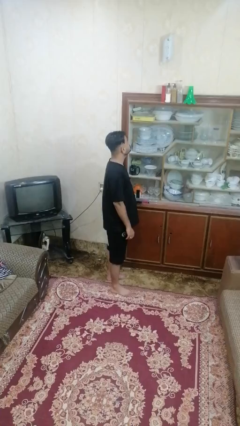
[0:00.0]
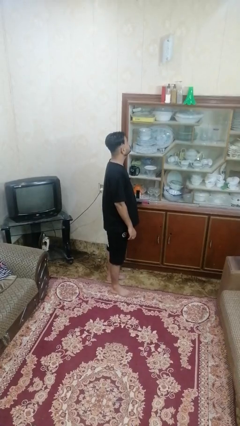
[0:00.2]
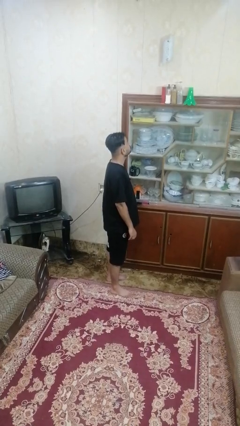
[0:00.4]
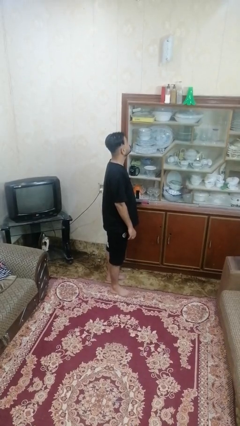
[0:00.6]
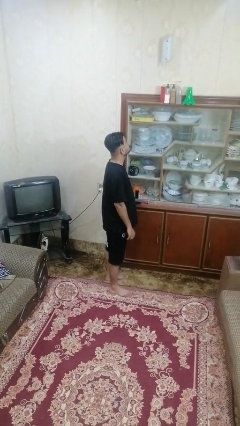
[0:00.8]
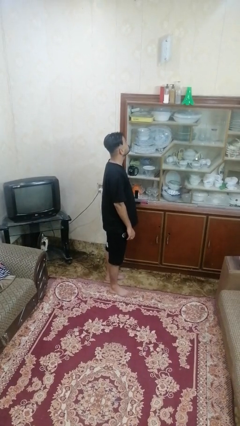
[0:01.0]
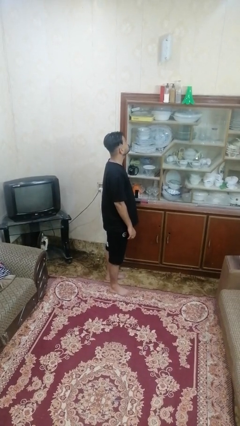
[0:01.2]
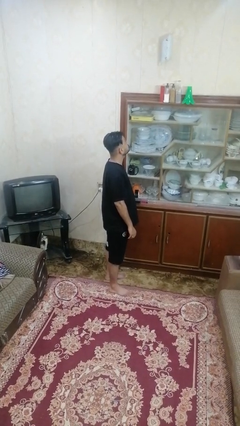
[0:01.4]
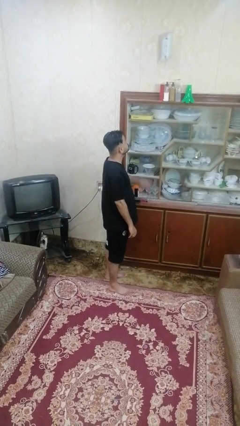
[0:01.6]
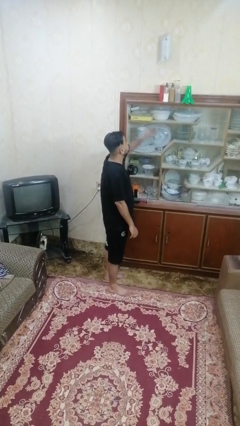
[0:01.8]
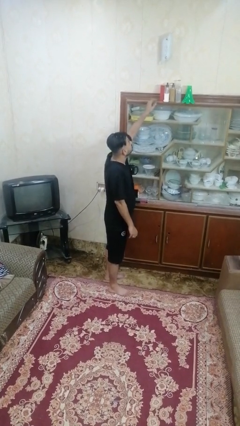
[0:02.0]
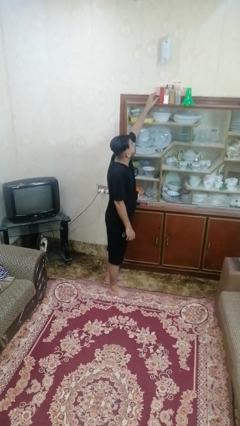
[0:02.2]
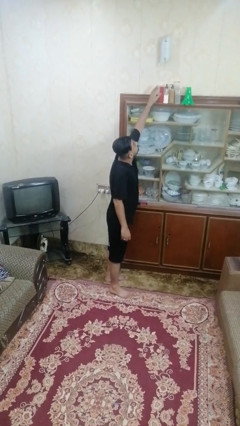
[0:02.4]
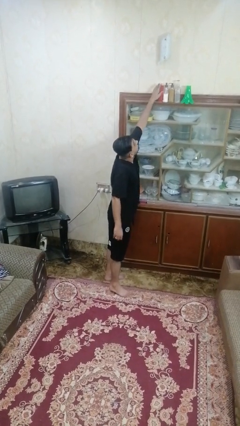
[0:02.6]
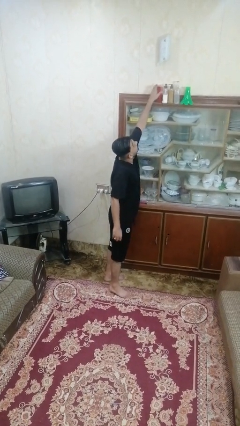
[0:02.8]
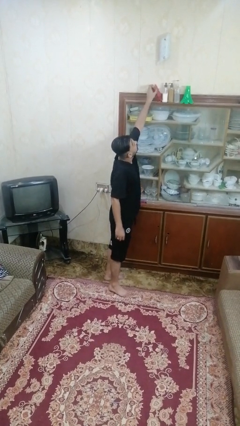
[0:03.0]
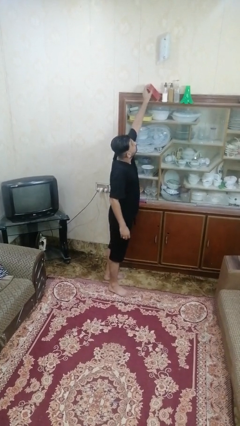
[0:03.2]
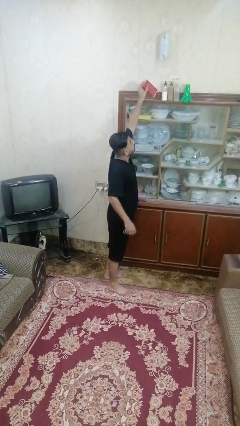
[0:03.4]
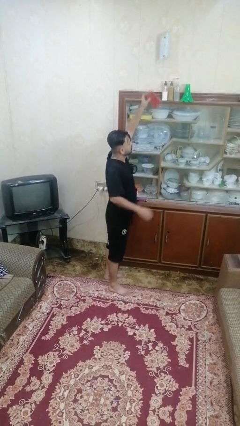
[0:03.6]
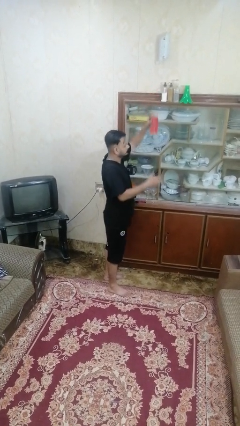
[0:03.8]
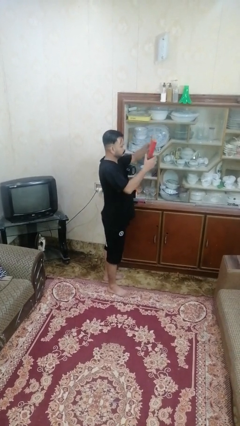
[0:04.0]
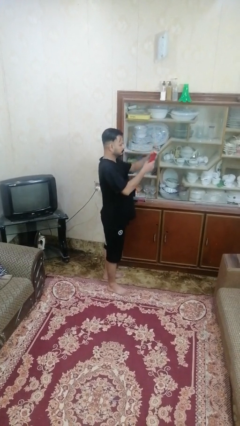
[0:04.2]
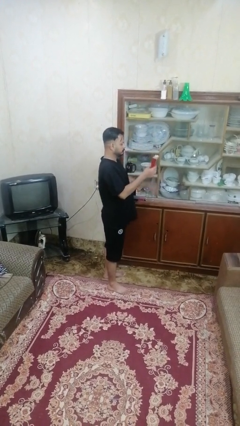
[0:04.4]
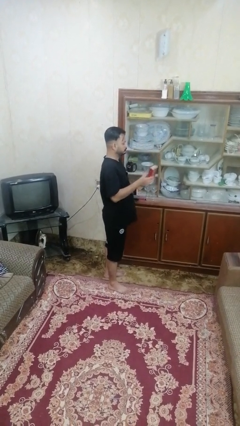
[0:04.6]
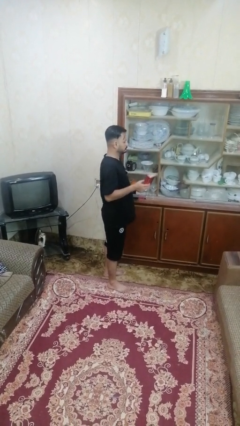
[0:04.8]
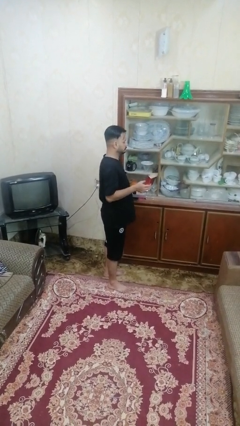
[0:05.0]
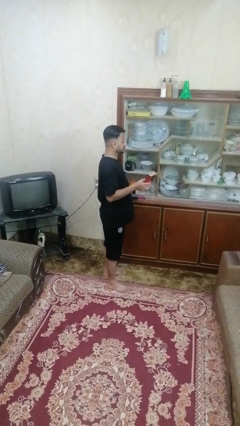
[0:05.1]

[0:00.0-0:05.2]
person picks up object from shelf

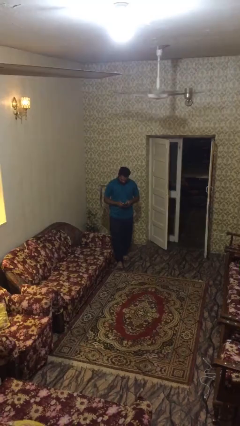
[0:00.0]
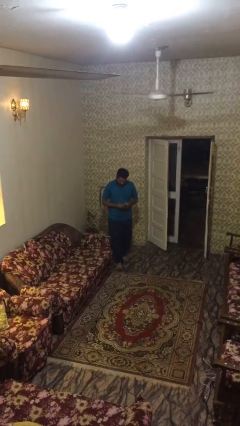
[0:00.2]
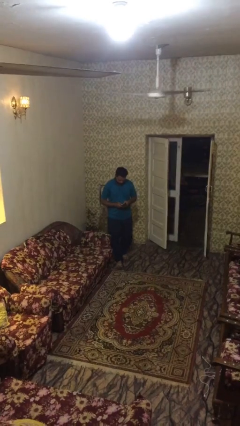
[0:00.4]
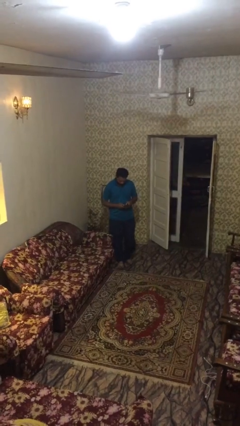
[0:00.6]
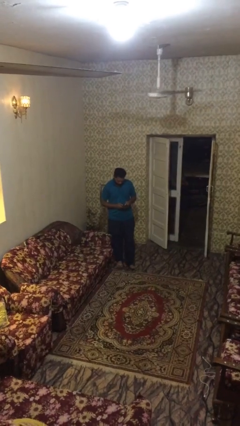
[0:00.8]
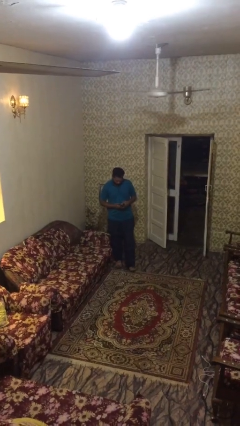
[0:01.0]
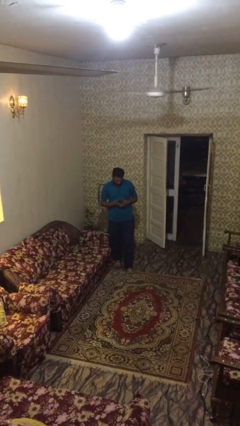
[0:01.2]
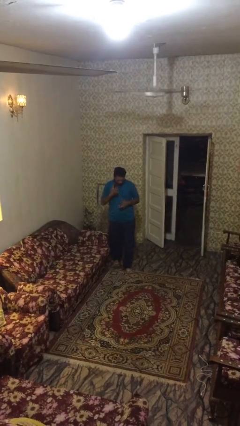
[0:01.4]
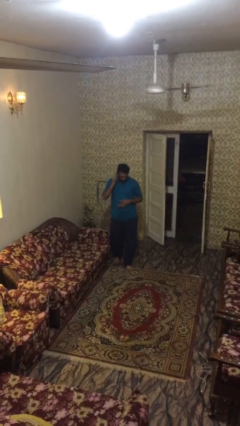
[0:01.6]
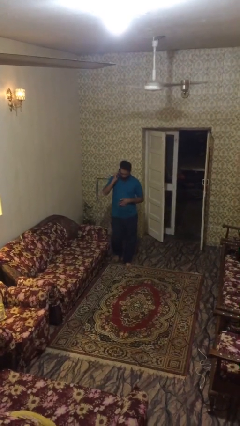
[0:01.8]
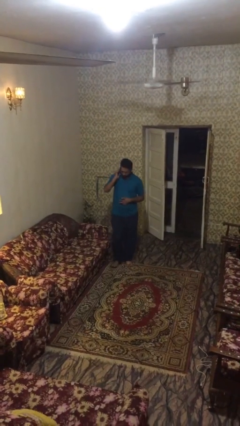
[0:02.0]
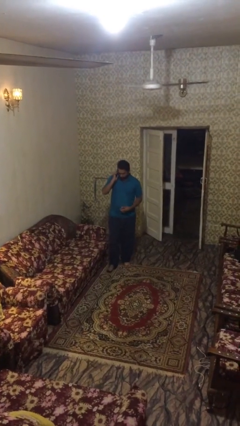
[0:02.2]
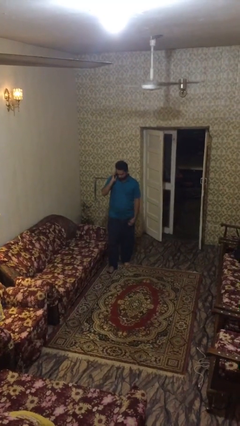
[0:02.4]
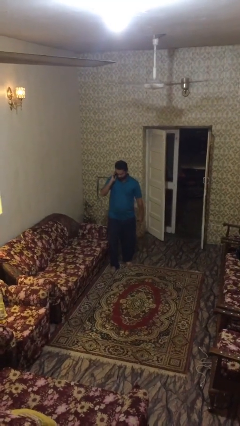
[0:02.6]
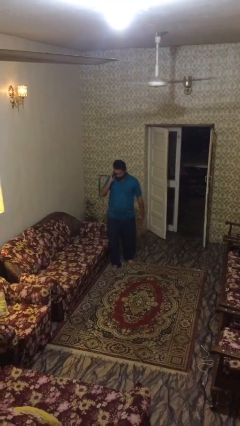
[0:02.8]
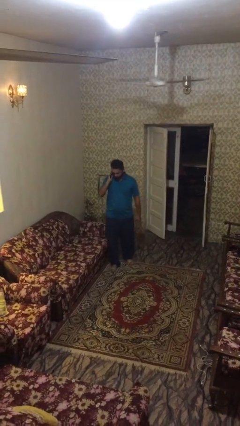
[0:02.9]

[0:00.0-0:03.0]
person talks on phone

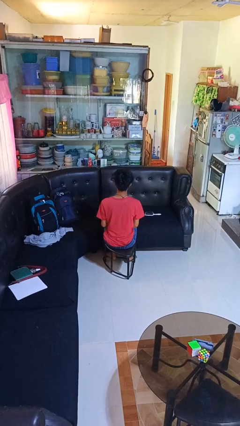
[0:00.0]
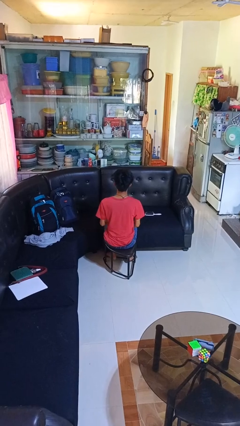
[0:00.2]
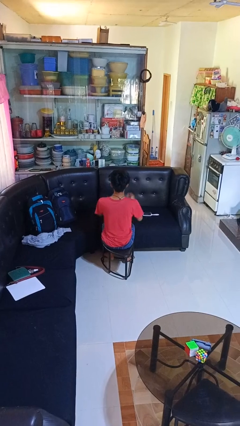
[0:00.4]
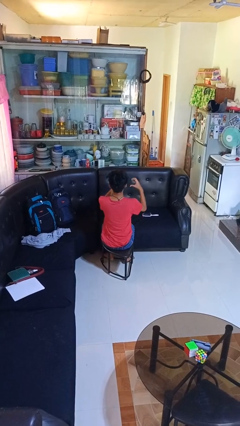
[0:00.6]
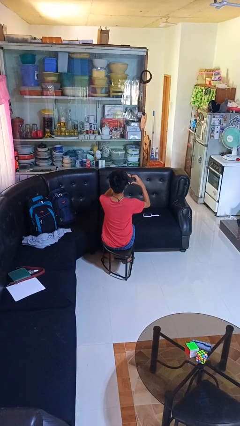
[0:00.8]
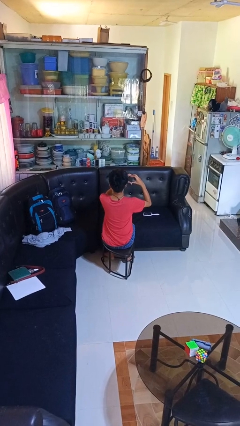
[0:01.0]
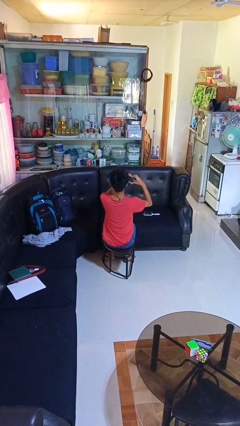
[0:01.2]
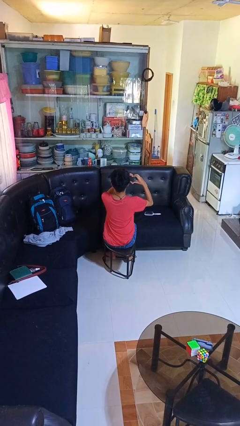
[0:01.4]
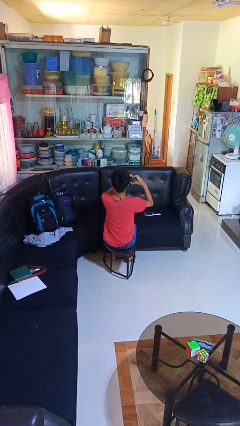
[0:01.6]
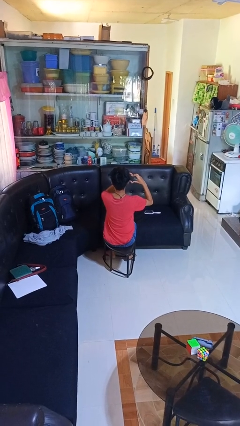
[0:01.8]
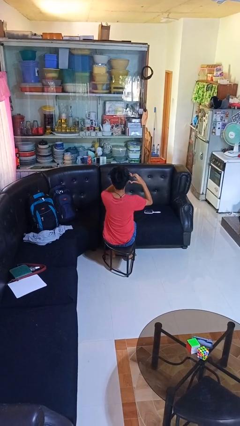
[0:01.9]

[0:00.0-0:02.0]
person gestures heart

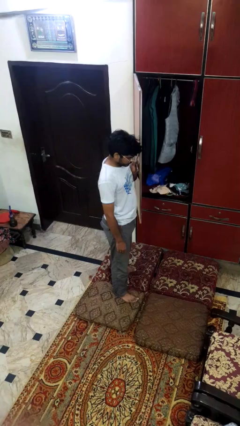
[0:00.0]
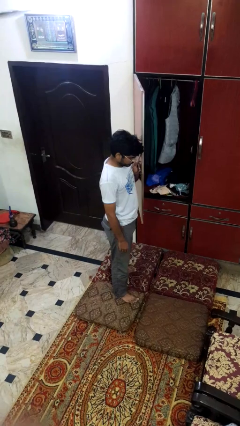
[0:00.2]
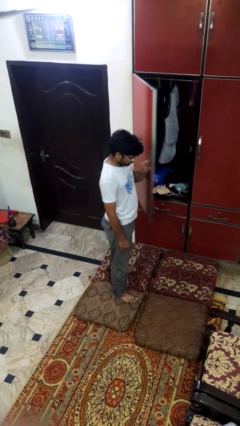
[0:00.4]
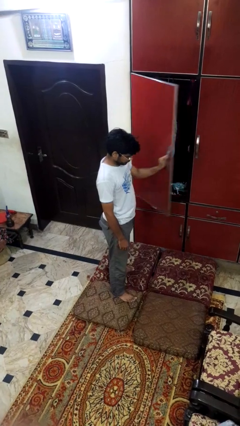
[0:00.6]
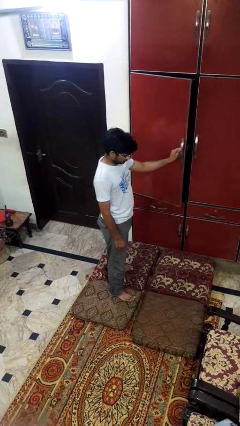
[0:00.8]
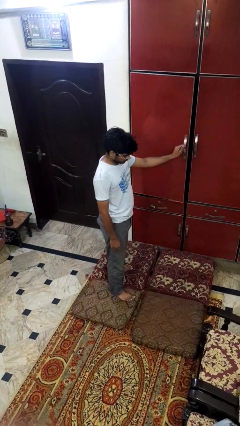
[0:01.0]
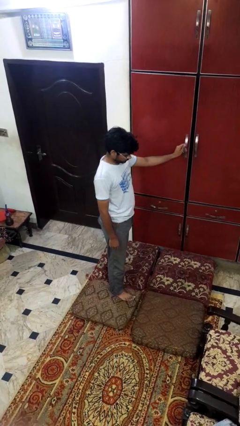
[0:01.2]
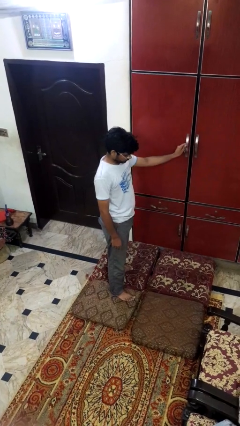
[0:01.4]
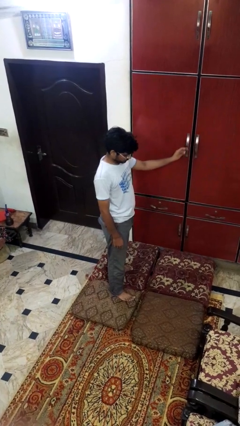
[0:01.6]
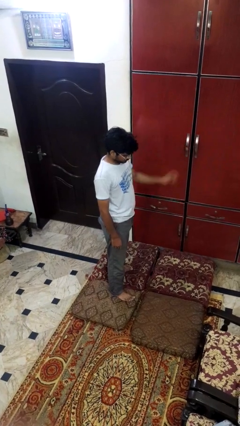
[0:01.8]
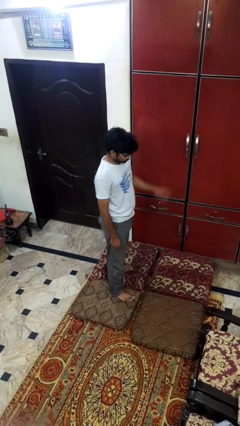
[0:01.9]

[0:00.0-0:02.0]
person closes closet door

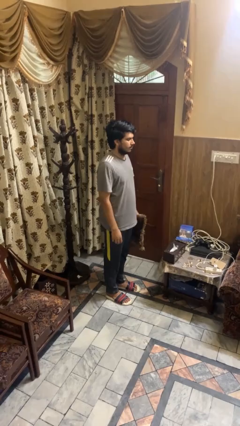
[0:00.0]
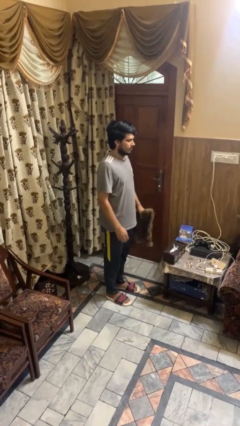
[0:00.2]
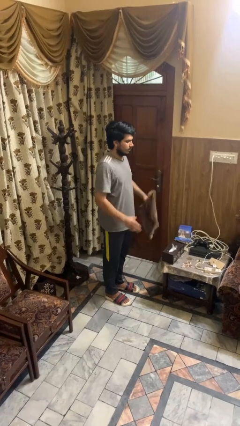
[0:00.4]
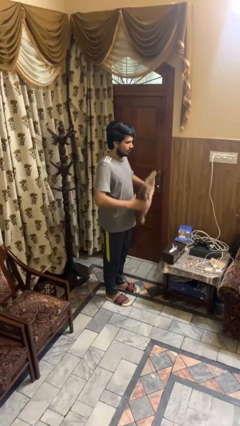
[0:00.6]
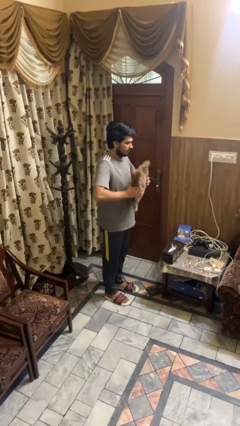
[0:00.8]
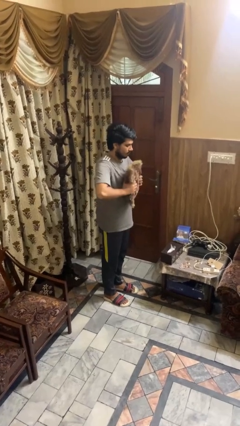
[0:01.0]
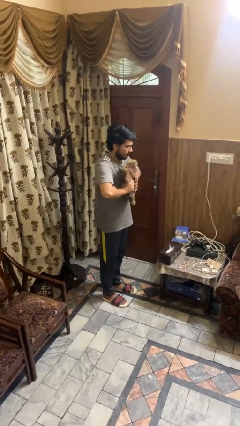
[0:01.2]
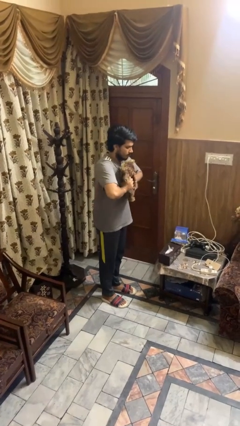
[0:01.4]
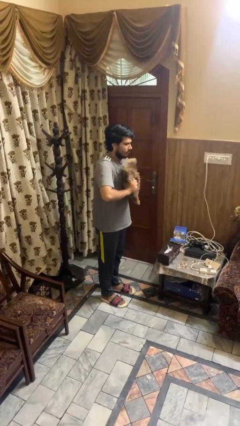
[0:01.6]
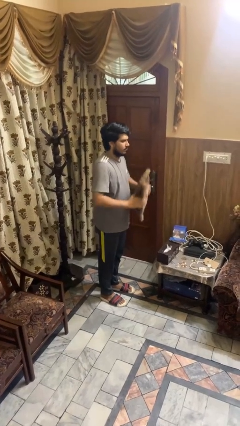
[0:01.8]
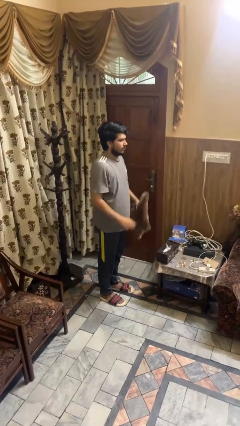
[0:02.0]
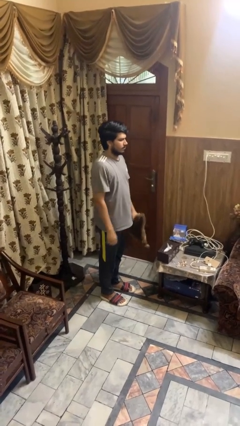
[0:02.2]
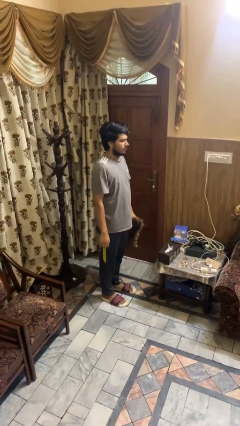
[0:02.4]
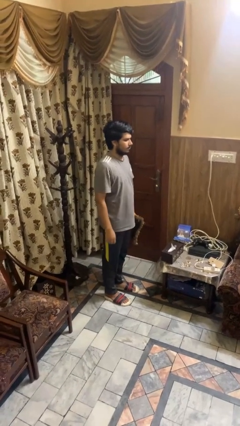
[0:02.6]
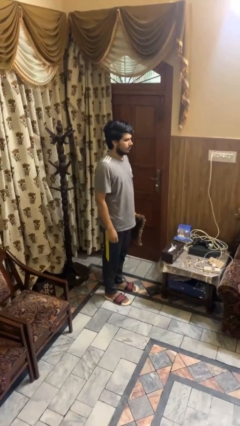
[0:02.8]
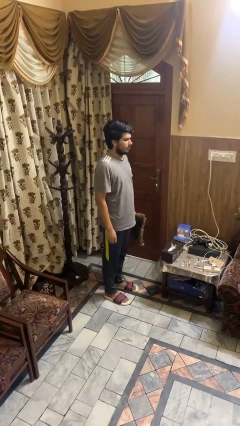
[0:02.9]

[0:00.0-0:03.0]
person squeezes object

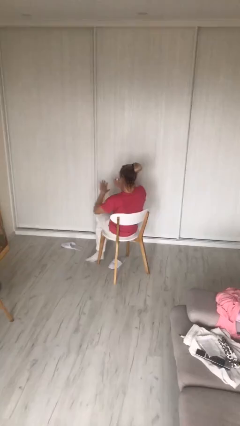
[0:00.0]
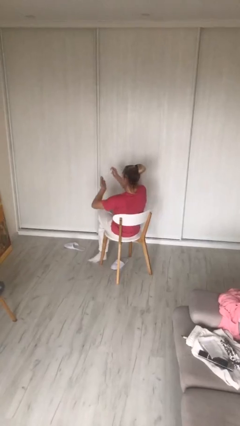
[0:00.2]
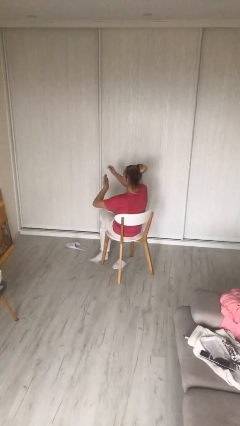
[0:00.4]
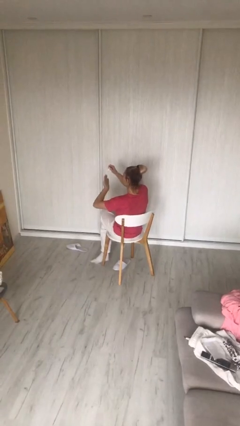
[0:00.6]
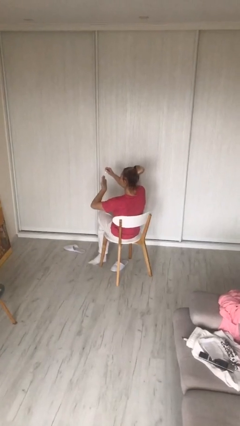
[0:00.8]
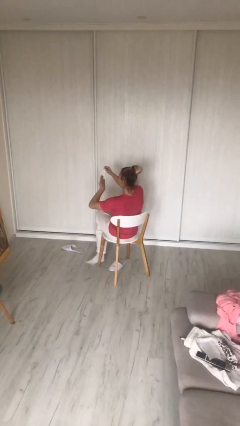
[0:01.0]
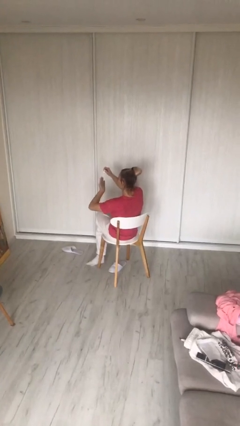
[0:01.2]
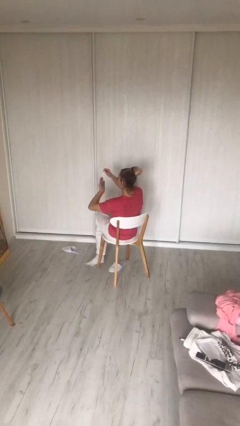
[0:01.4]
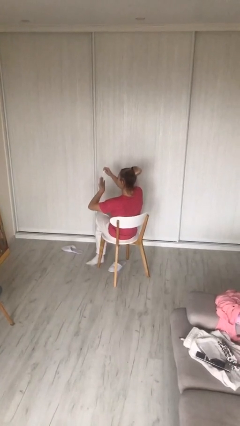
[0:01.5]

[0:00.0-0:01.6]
person paints fingernails

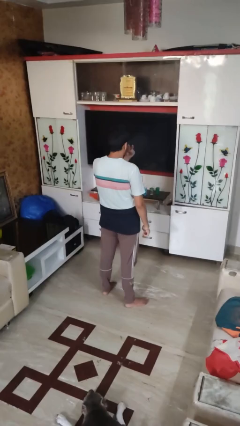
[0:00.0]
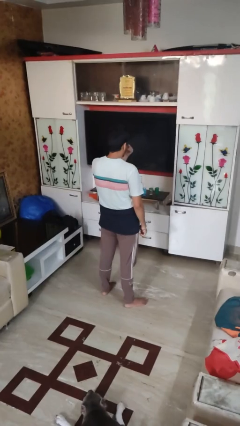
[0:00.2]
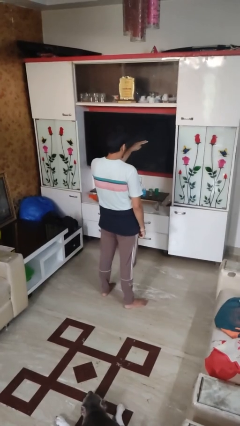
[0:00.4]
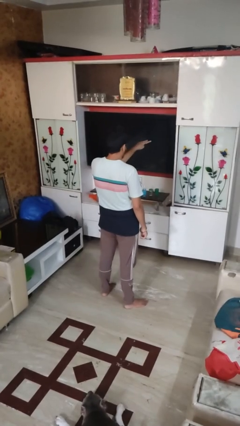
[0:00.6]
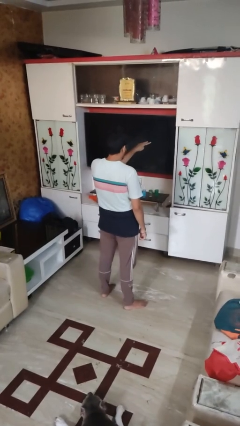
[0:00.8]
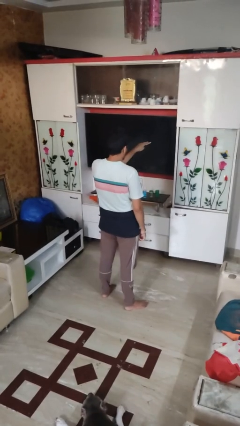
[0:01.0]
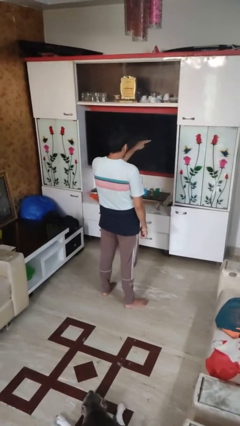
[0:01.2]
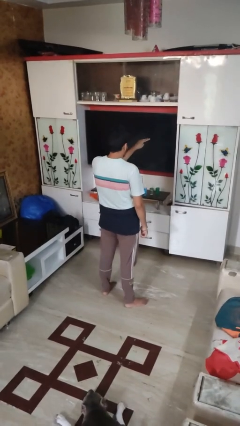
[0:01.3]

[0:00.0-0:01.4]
person gestures watch closely
